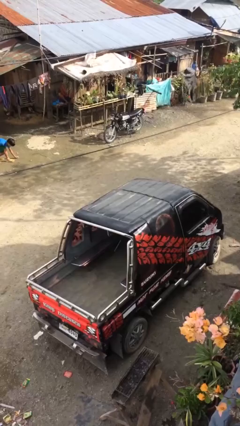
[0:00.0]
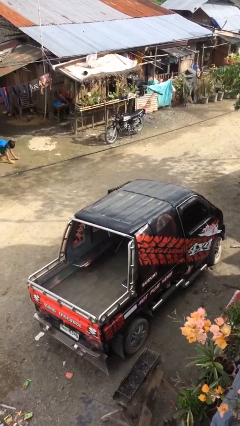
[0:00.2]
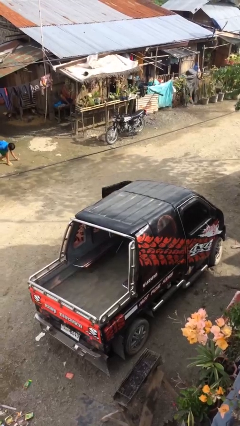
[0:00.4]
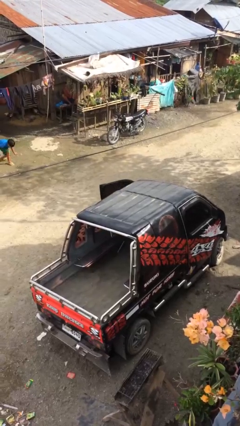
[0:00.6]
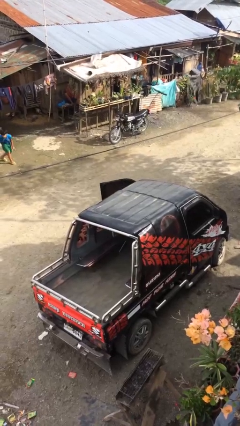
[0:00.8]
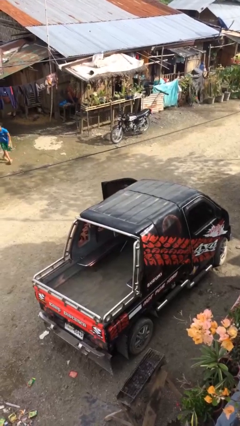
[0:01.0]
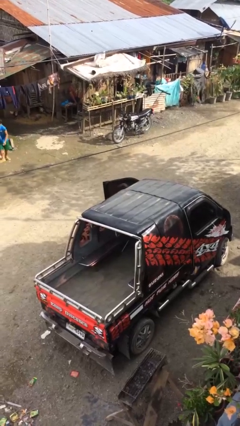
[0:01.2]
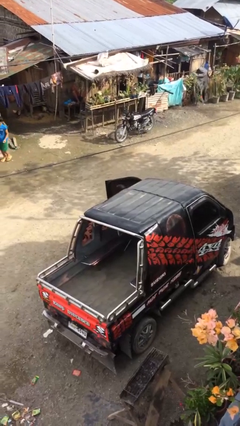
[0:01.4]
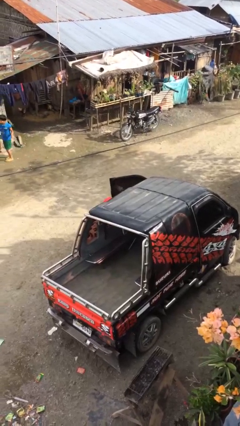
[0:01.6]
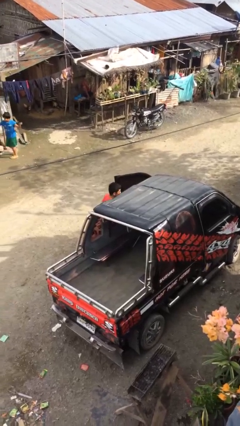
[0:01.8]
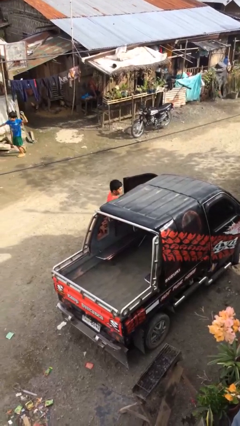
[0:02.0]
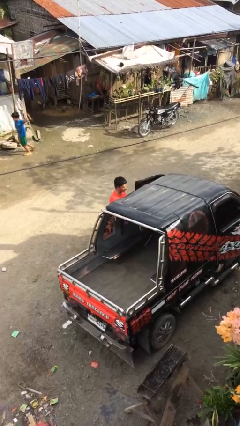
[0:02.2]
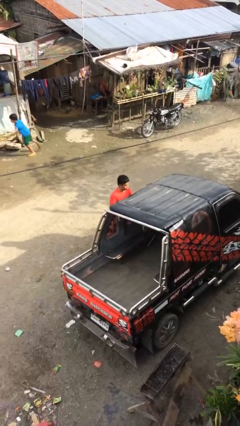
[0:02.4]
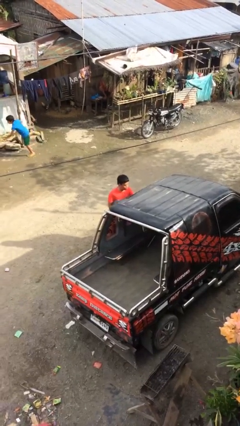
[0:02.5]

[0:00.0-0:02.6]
person exits car

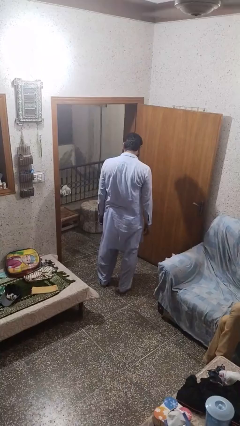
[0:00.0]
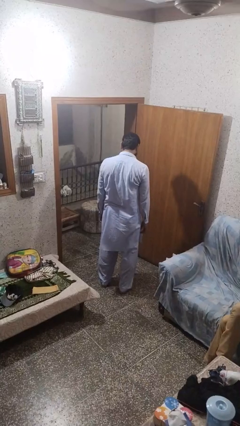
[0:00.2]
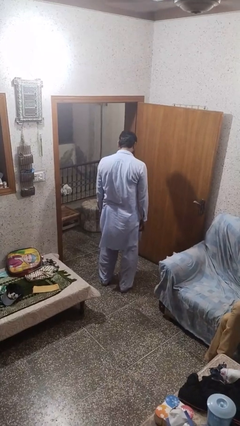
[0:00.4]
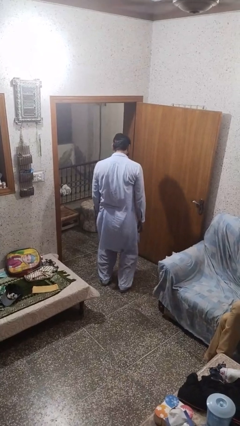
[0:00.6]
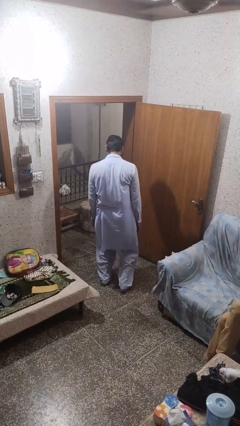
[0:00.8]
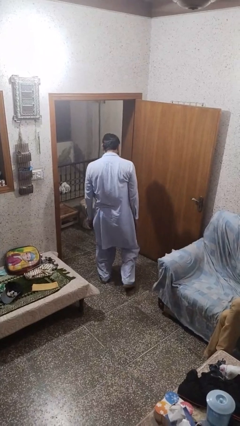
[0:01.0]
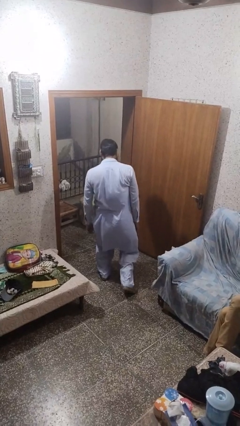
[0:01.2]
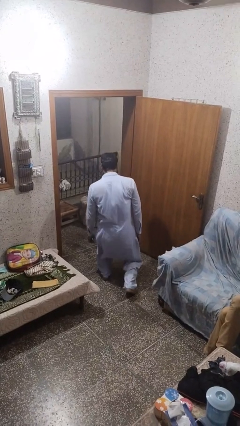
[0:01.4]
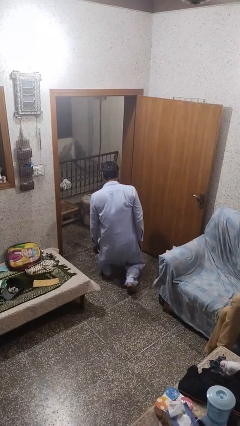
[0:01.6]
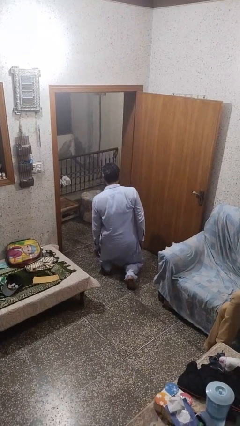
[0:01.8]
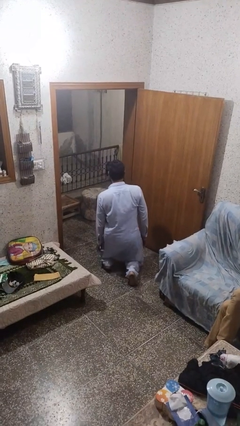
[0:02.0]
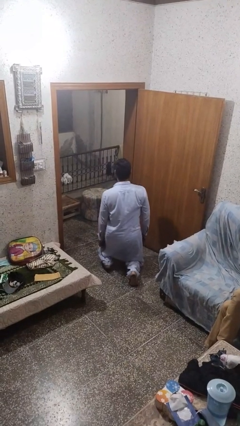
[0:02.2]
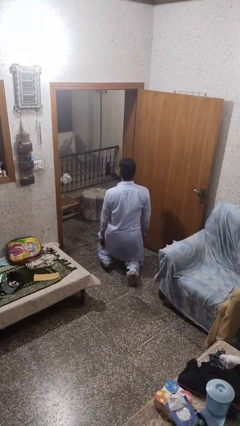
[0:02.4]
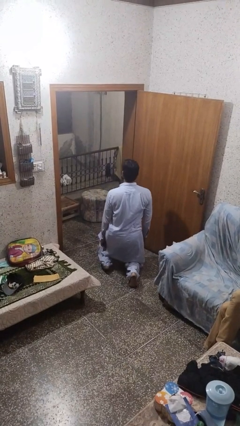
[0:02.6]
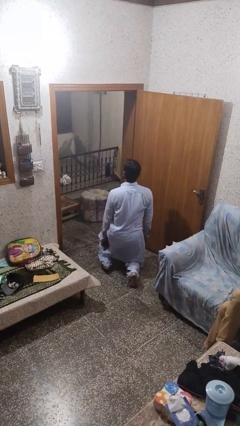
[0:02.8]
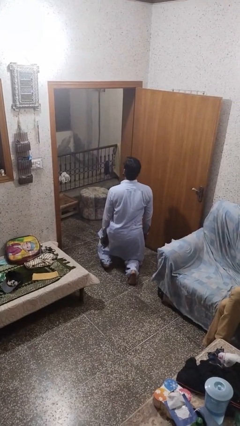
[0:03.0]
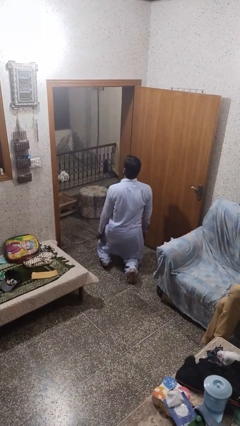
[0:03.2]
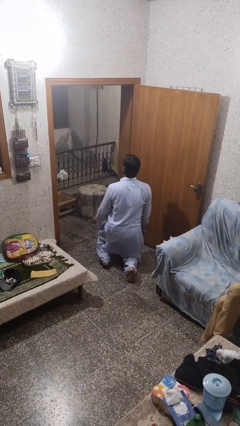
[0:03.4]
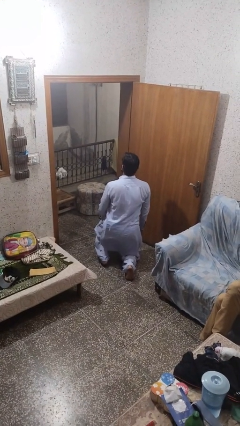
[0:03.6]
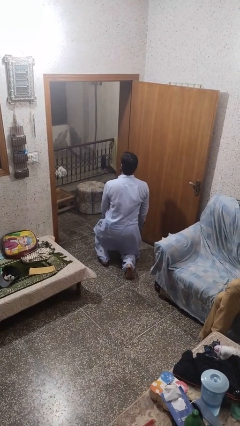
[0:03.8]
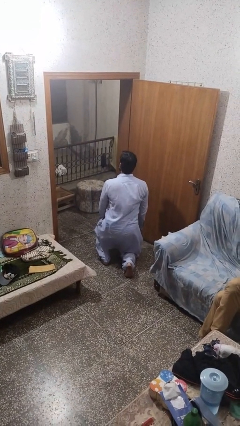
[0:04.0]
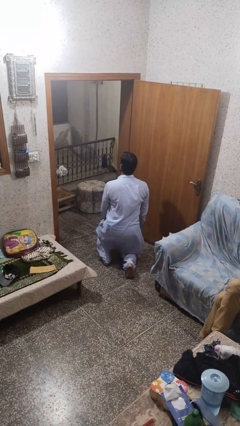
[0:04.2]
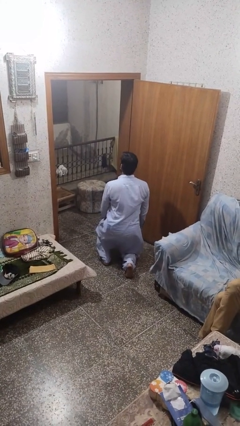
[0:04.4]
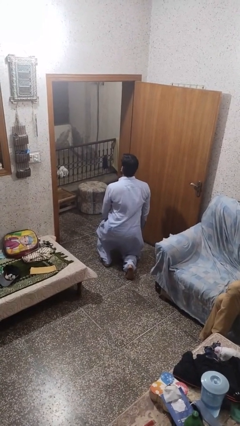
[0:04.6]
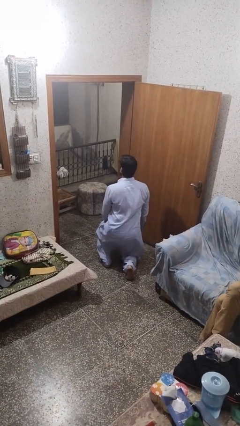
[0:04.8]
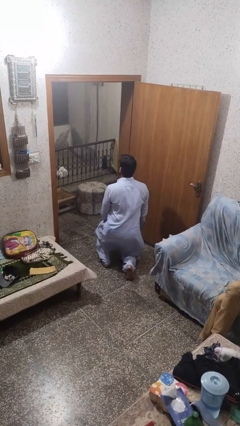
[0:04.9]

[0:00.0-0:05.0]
person kneels

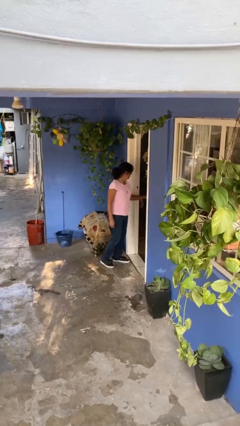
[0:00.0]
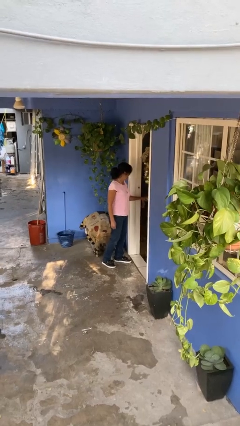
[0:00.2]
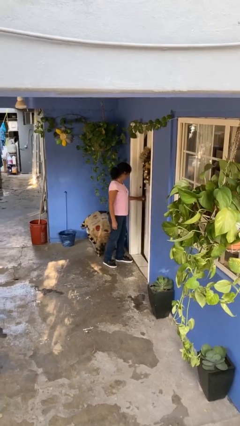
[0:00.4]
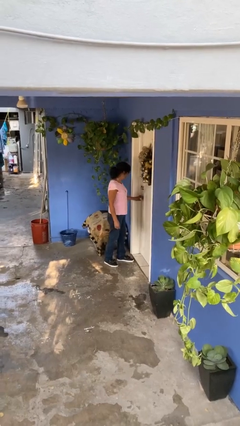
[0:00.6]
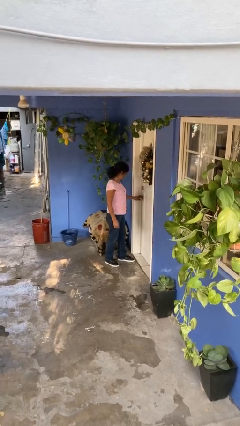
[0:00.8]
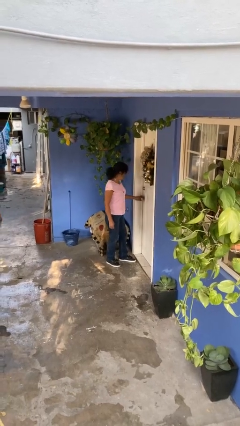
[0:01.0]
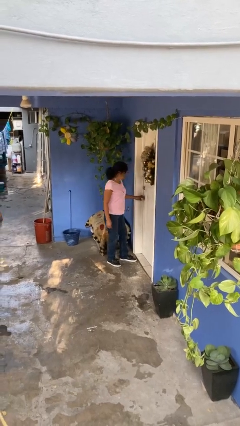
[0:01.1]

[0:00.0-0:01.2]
person closes facility door

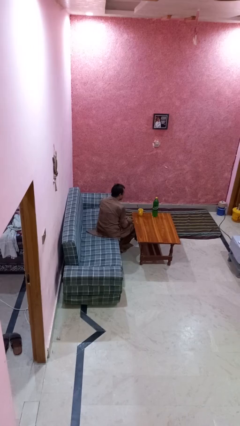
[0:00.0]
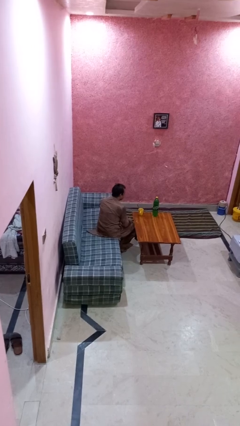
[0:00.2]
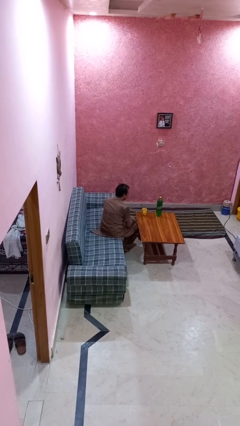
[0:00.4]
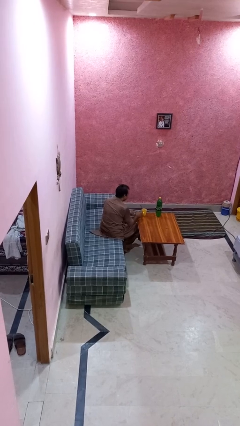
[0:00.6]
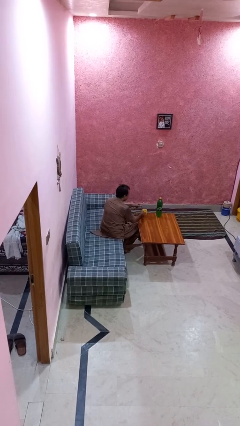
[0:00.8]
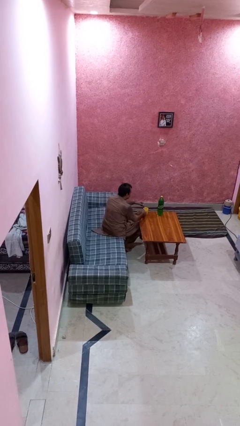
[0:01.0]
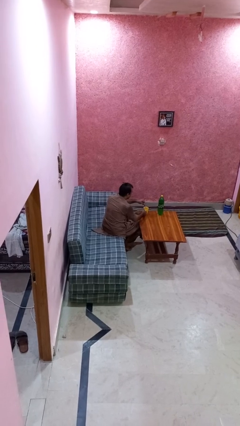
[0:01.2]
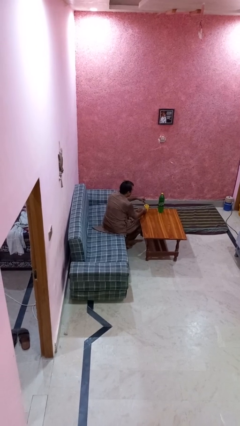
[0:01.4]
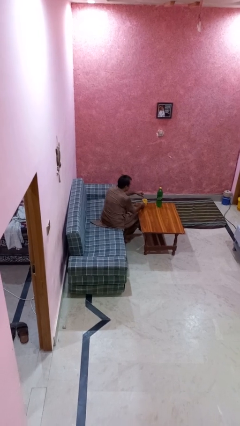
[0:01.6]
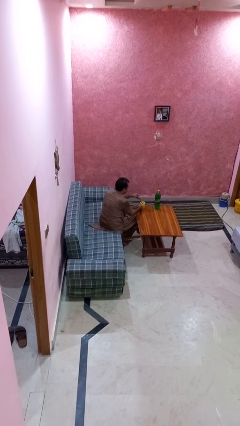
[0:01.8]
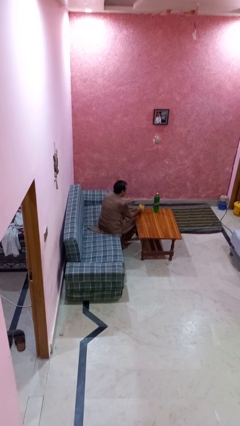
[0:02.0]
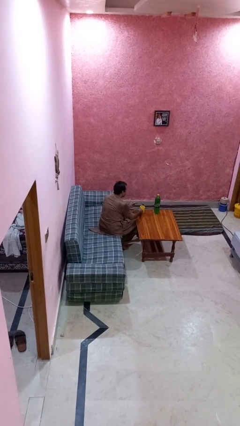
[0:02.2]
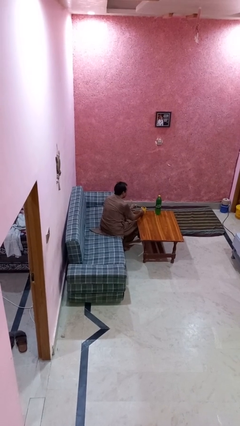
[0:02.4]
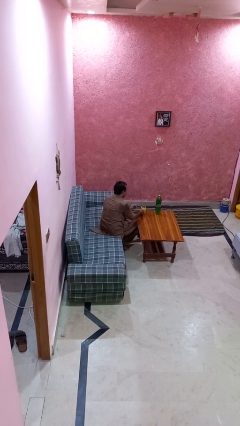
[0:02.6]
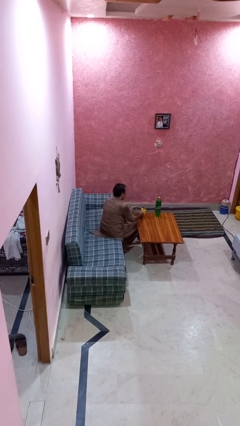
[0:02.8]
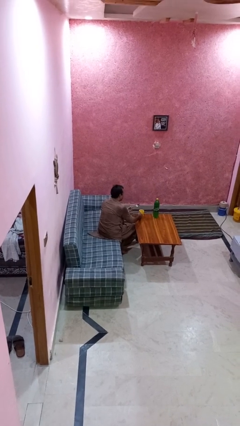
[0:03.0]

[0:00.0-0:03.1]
person stirs mug

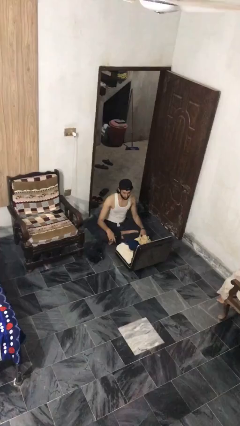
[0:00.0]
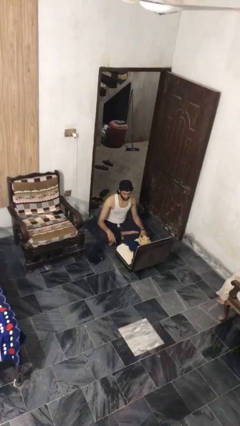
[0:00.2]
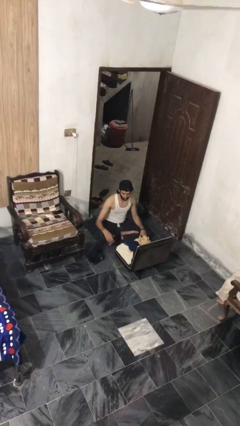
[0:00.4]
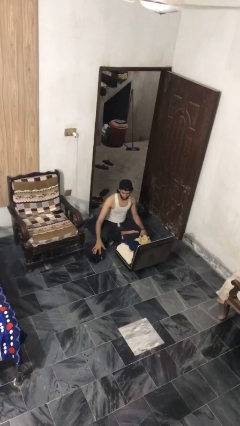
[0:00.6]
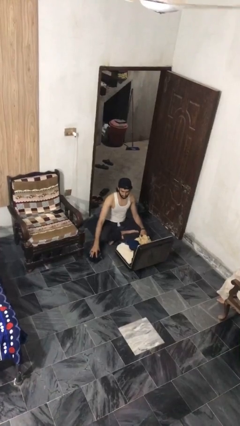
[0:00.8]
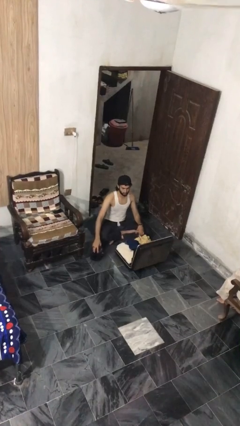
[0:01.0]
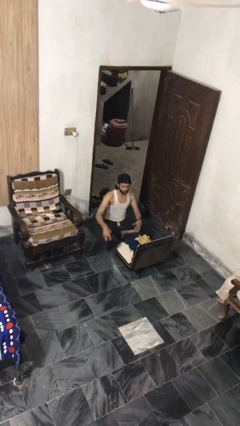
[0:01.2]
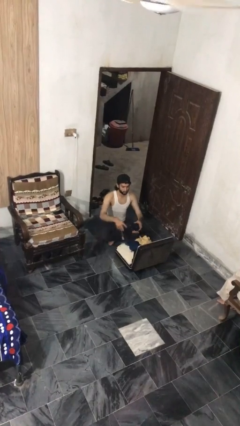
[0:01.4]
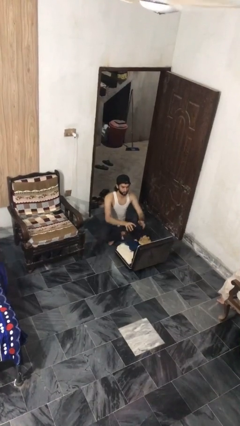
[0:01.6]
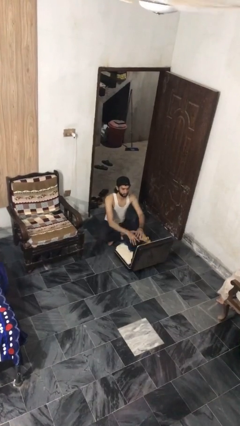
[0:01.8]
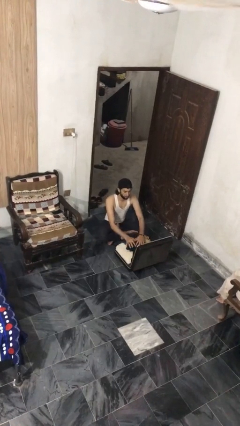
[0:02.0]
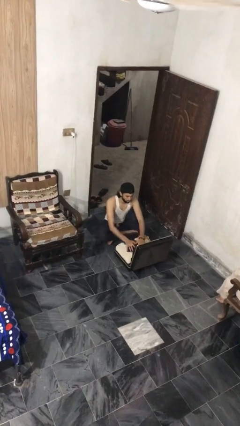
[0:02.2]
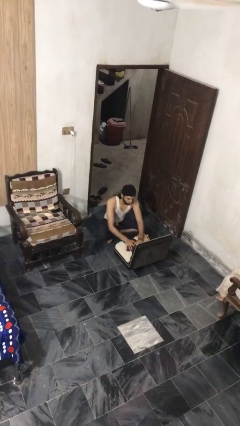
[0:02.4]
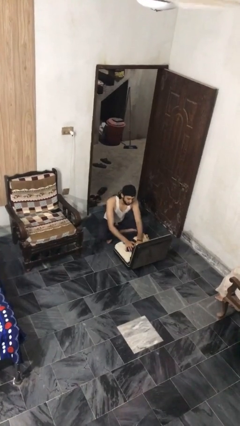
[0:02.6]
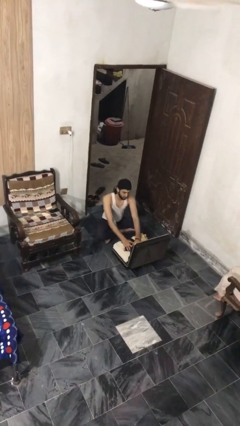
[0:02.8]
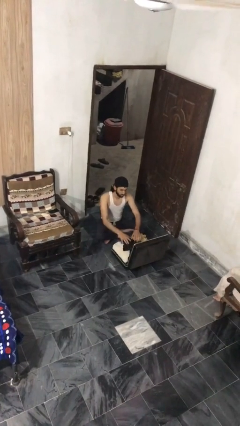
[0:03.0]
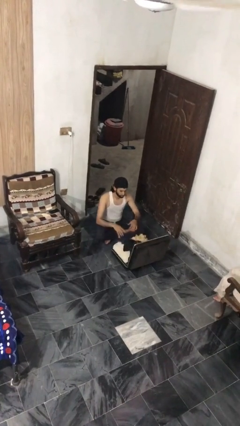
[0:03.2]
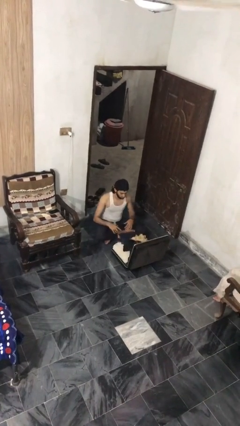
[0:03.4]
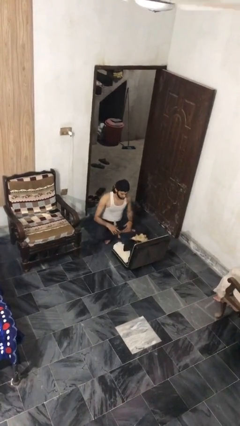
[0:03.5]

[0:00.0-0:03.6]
person loads clothes into suitcase

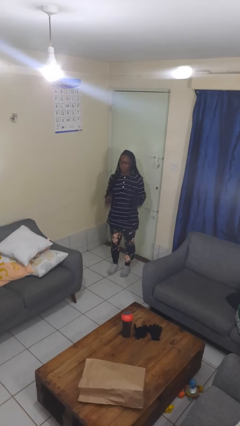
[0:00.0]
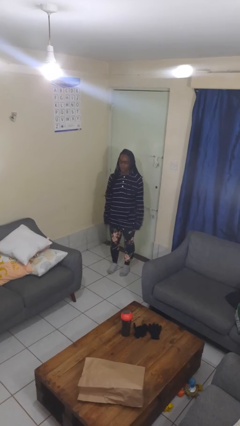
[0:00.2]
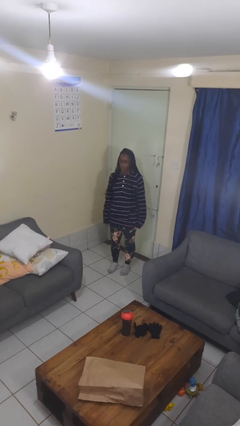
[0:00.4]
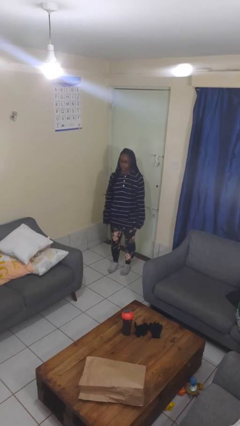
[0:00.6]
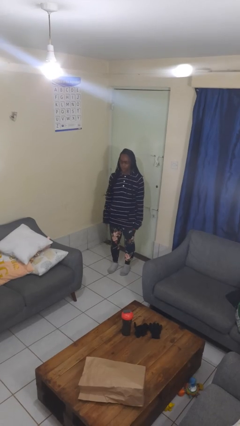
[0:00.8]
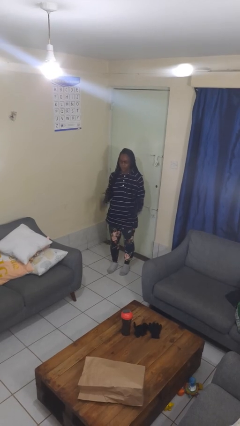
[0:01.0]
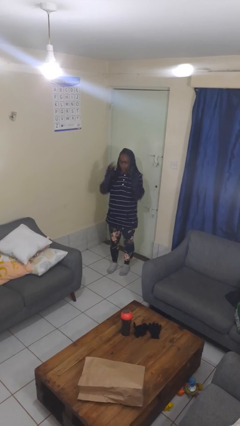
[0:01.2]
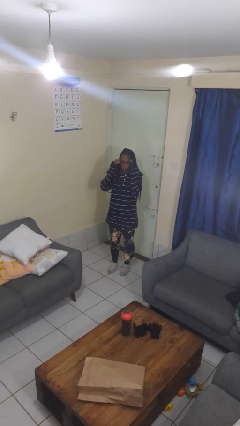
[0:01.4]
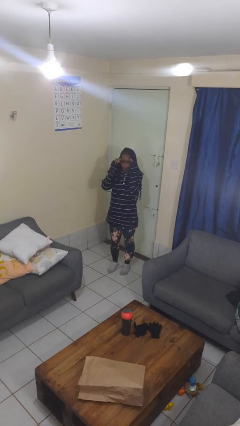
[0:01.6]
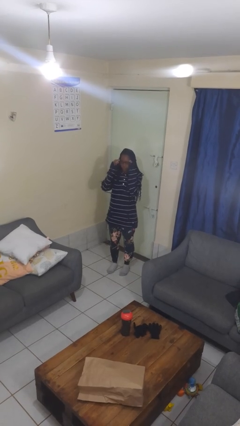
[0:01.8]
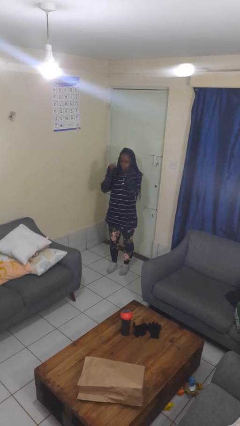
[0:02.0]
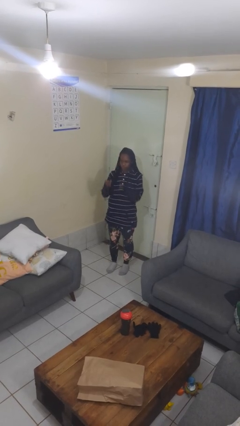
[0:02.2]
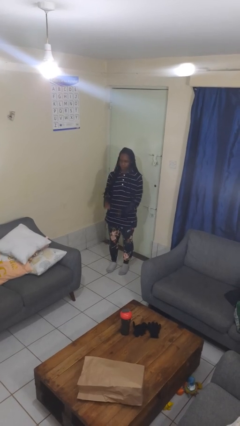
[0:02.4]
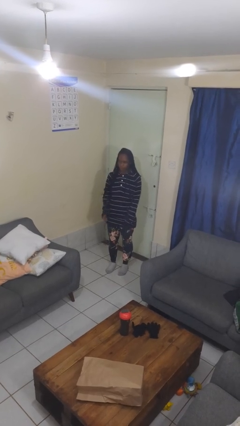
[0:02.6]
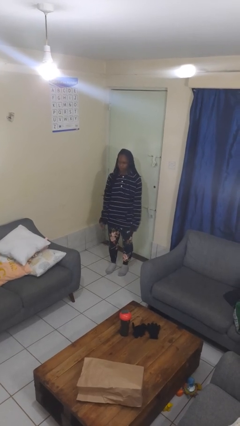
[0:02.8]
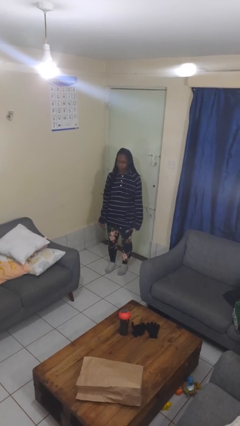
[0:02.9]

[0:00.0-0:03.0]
person takes off glasses
